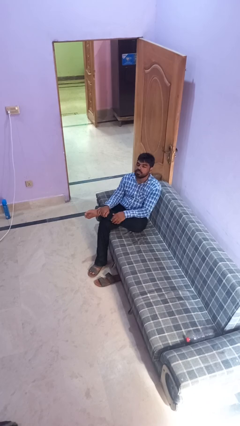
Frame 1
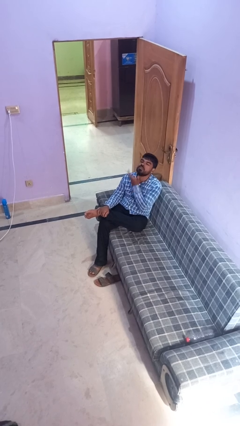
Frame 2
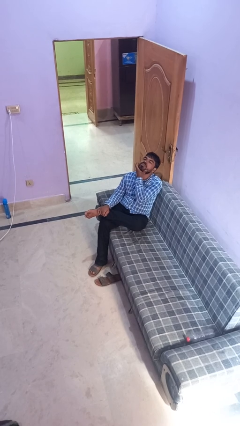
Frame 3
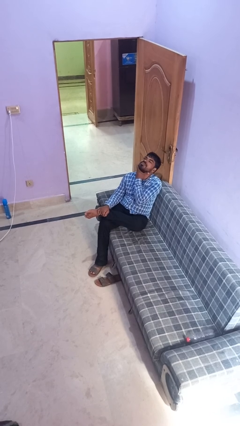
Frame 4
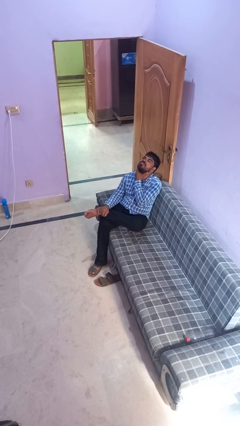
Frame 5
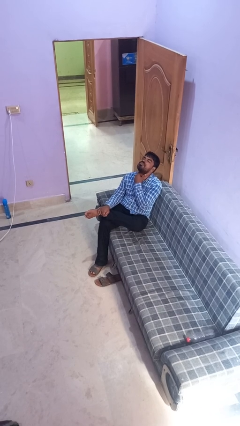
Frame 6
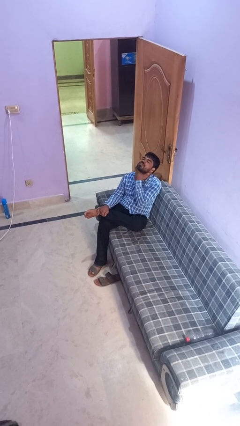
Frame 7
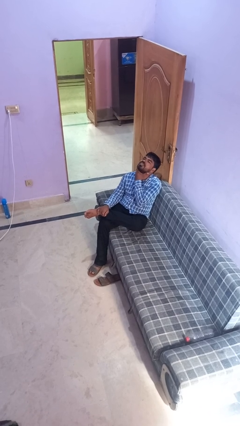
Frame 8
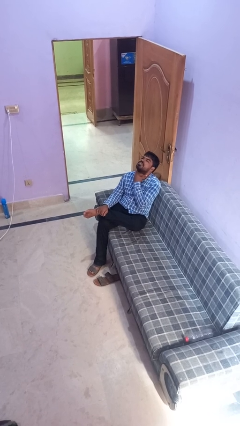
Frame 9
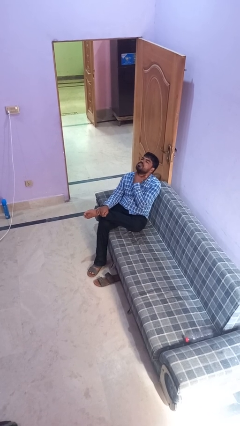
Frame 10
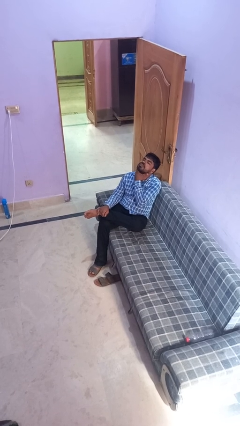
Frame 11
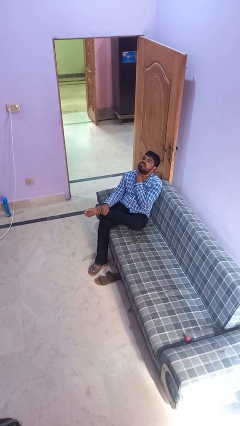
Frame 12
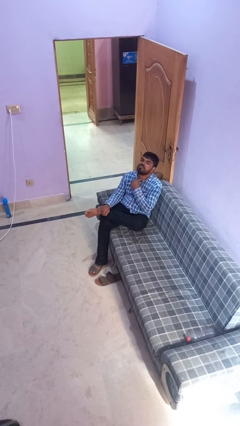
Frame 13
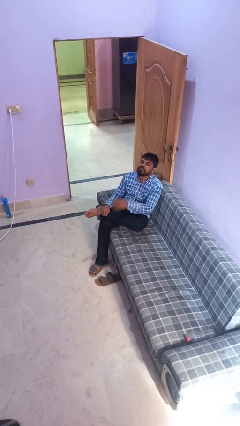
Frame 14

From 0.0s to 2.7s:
person rubs neck

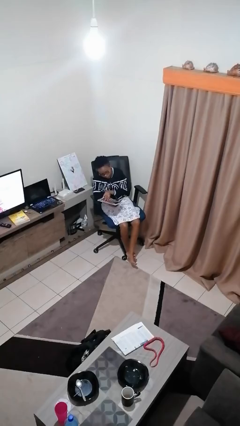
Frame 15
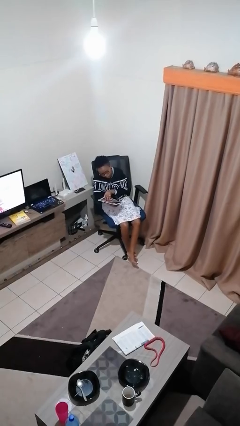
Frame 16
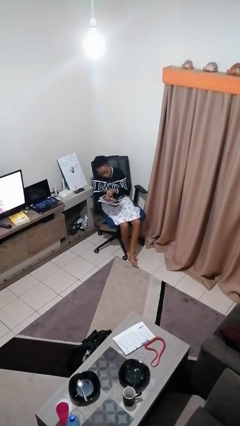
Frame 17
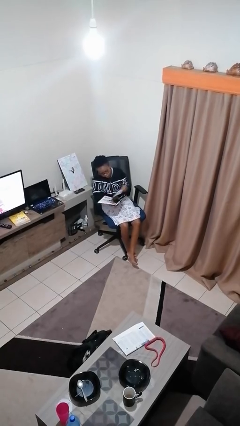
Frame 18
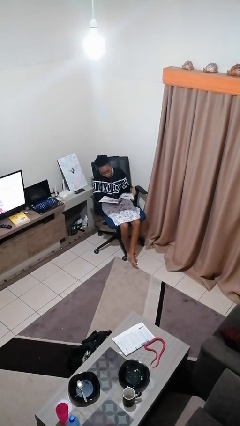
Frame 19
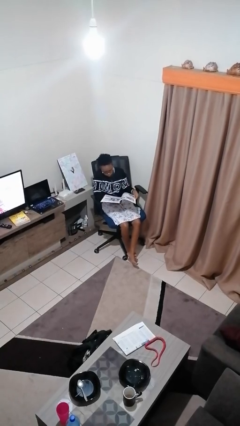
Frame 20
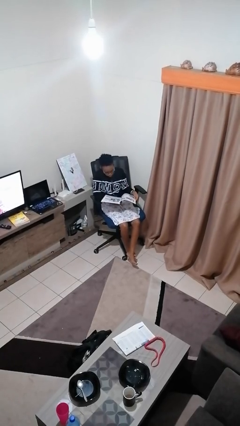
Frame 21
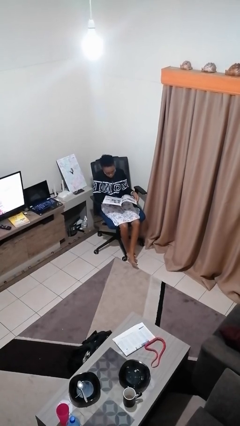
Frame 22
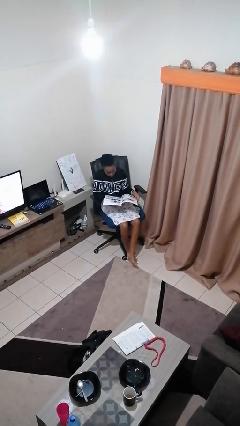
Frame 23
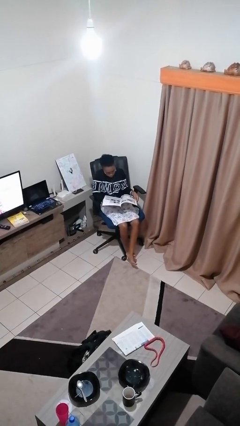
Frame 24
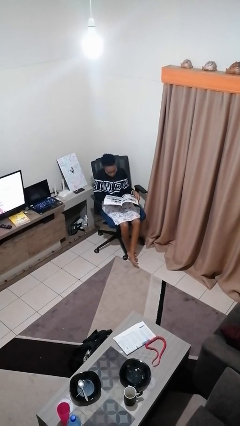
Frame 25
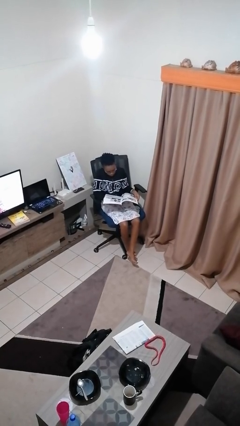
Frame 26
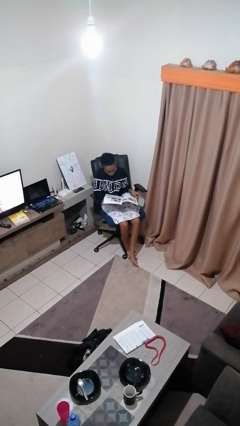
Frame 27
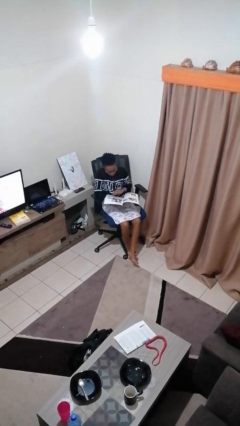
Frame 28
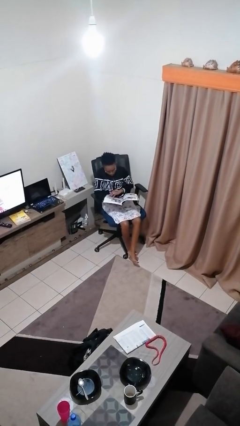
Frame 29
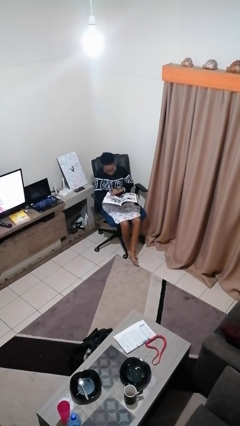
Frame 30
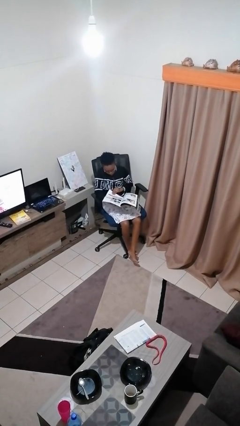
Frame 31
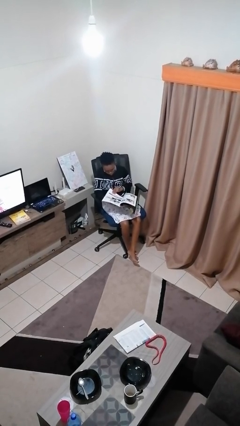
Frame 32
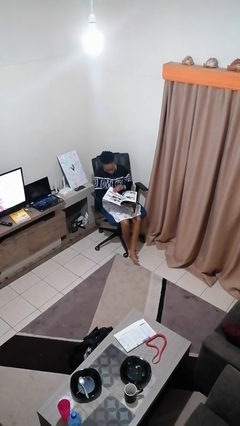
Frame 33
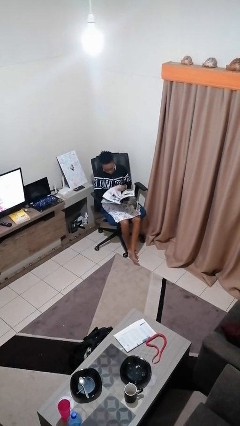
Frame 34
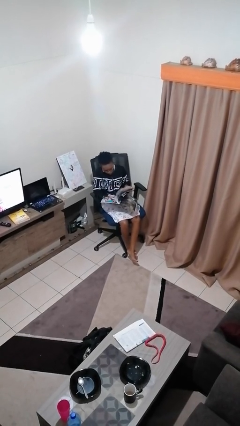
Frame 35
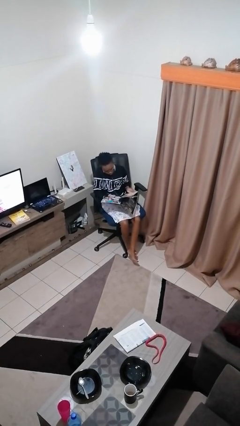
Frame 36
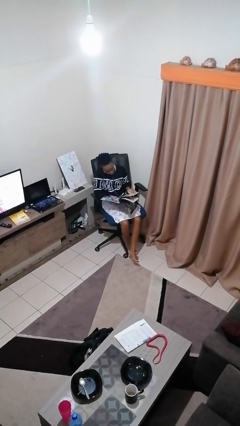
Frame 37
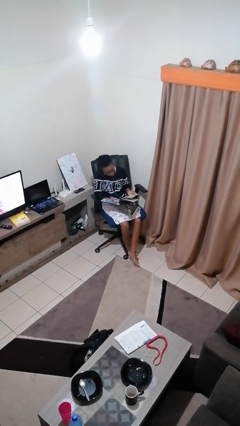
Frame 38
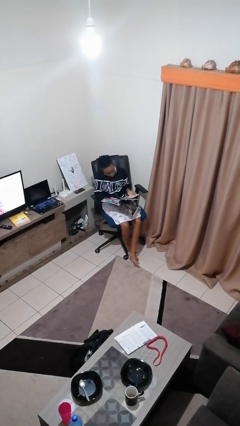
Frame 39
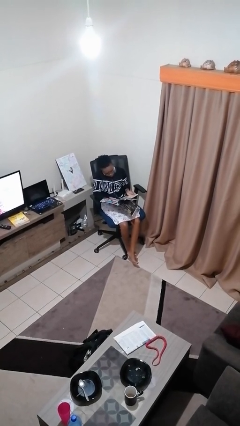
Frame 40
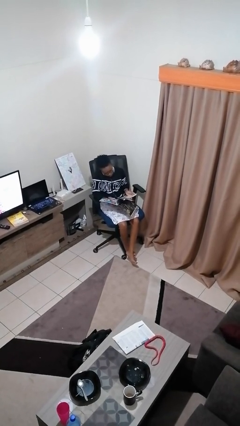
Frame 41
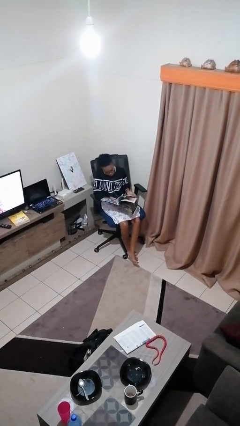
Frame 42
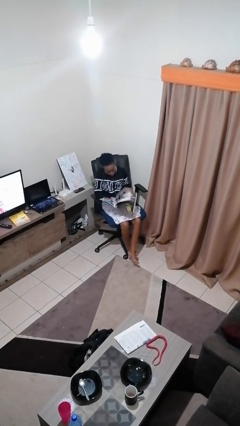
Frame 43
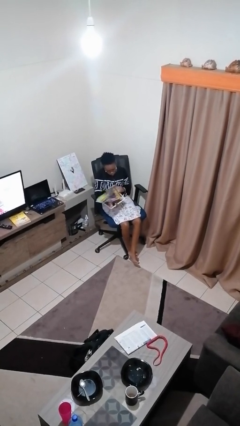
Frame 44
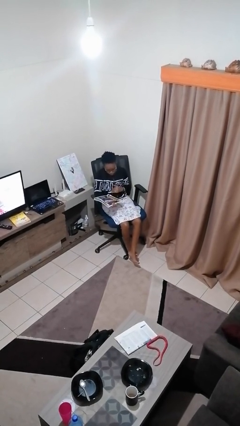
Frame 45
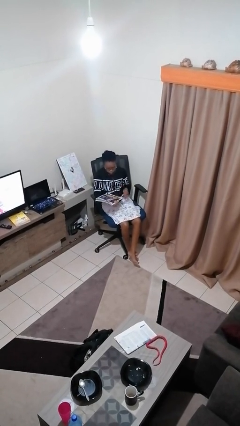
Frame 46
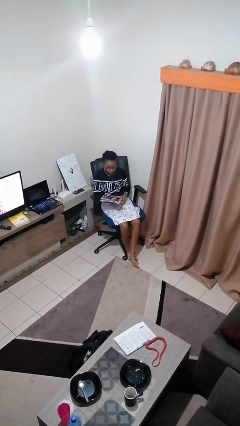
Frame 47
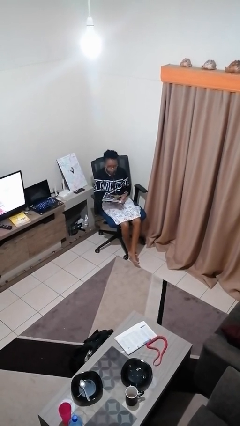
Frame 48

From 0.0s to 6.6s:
person reads magazine

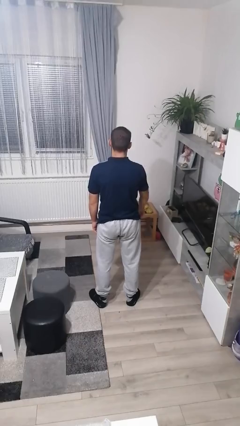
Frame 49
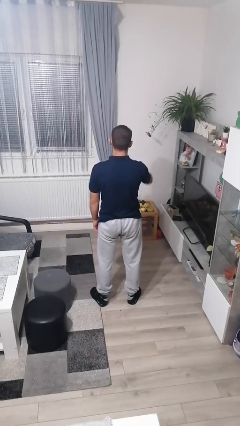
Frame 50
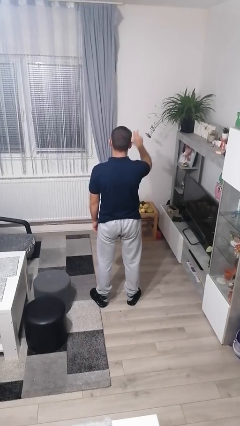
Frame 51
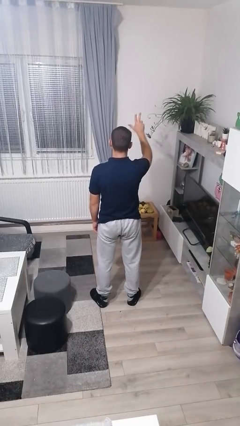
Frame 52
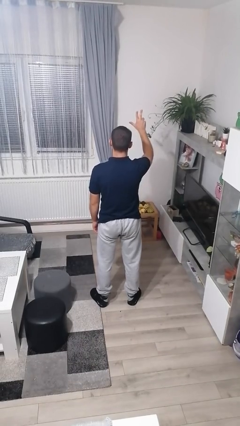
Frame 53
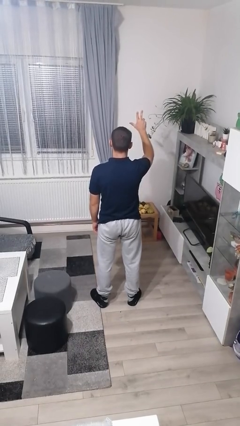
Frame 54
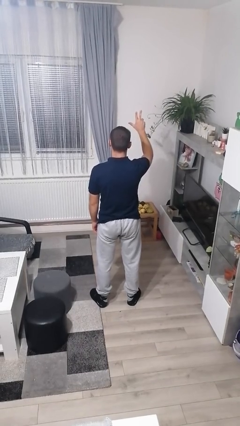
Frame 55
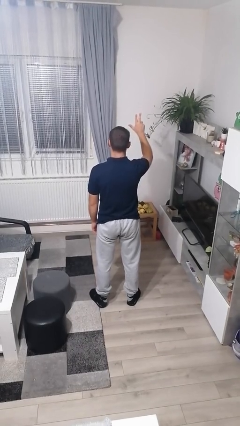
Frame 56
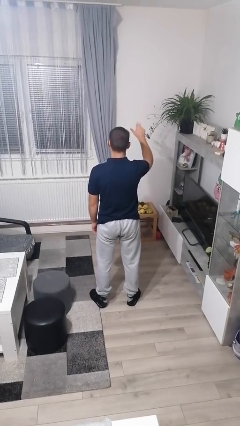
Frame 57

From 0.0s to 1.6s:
person gestures number three

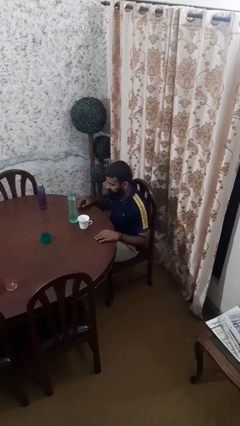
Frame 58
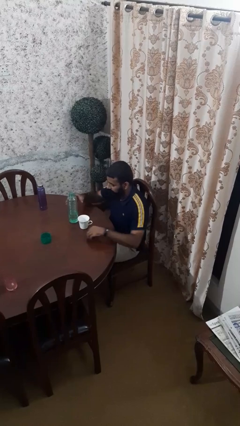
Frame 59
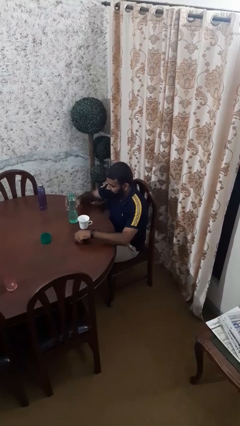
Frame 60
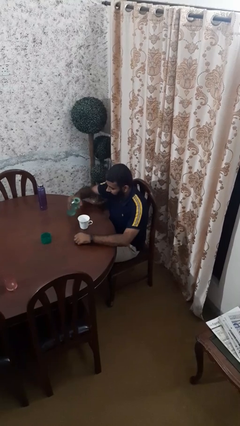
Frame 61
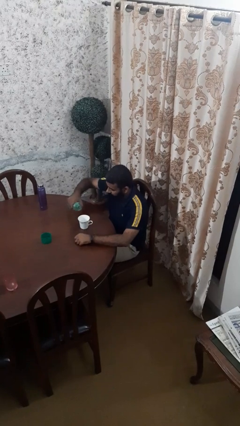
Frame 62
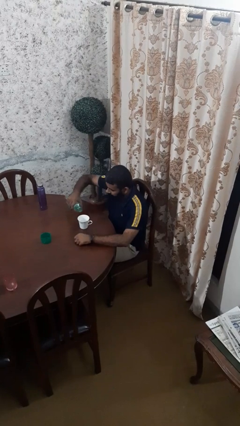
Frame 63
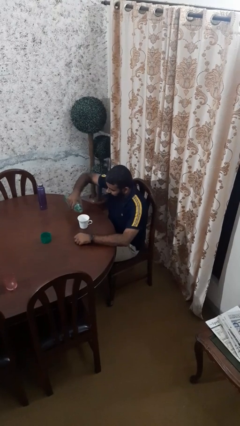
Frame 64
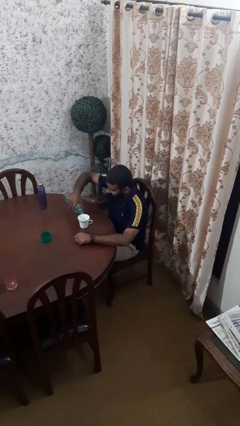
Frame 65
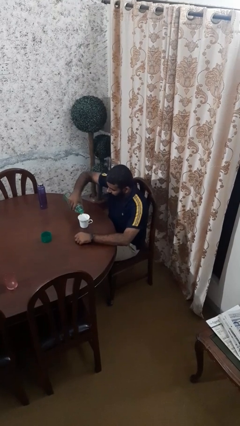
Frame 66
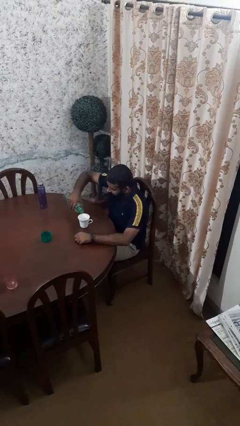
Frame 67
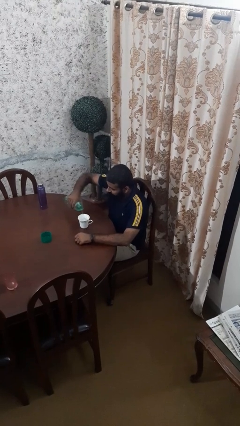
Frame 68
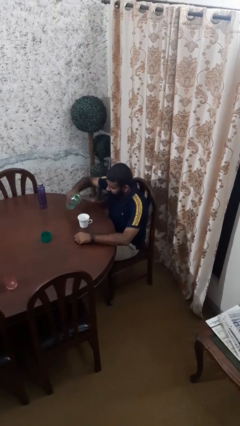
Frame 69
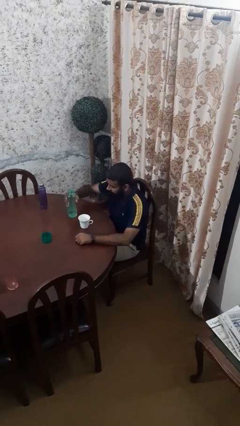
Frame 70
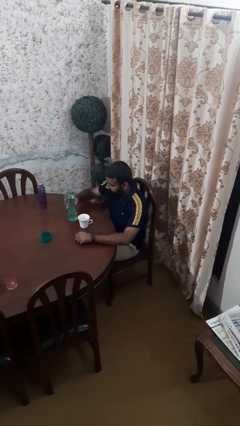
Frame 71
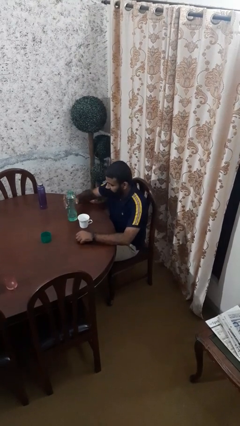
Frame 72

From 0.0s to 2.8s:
person pours liquid into cup

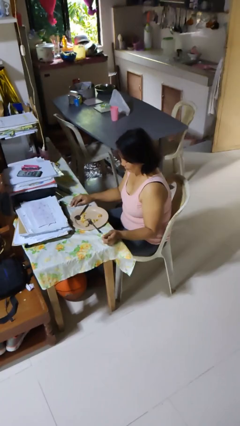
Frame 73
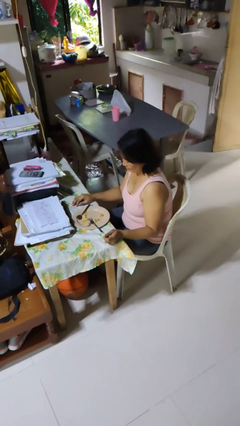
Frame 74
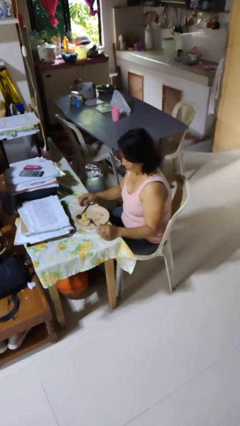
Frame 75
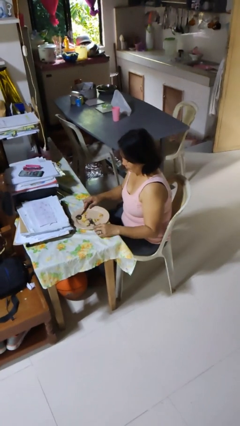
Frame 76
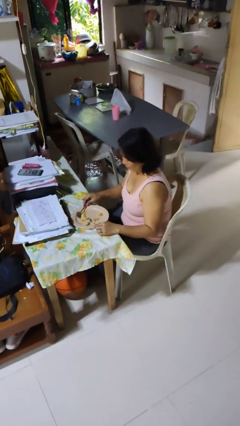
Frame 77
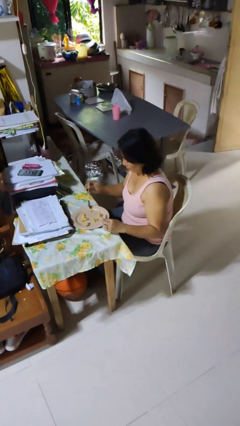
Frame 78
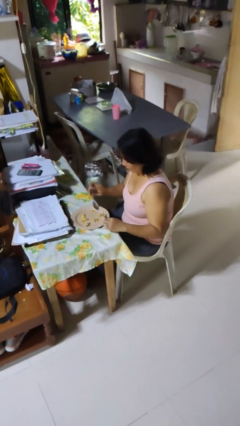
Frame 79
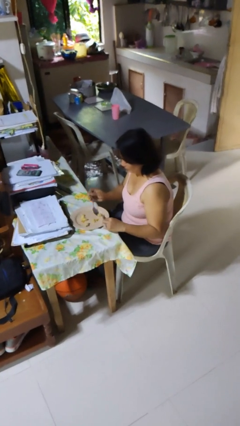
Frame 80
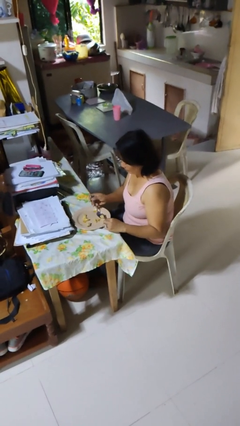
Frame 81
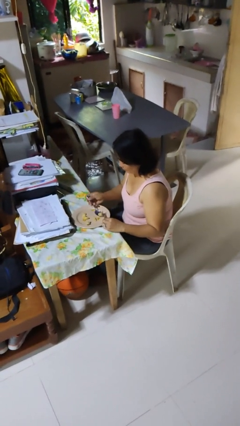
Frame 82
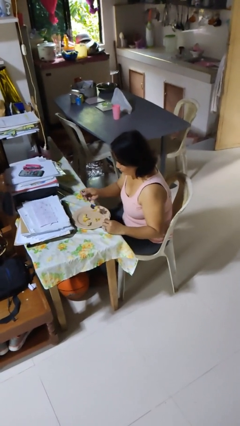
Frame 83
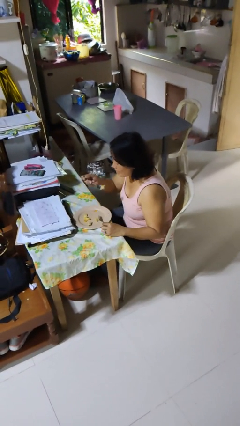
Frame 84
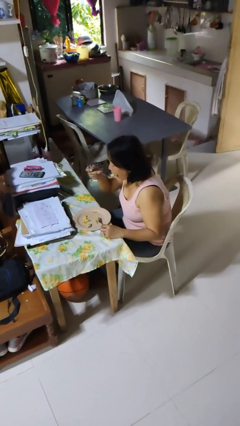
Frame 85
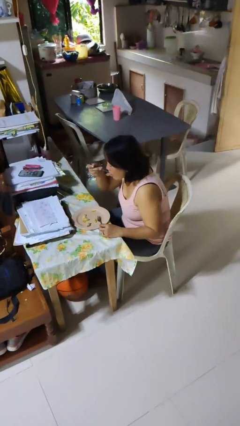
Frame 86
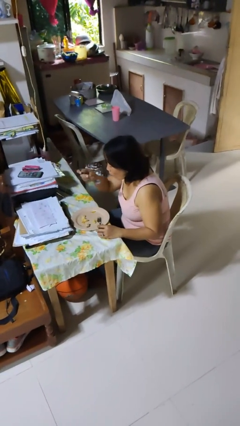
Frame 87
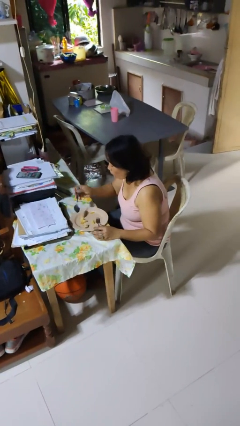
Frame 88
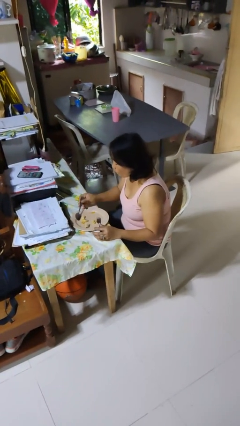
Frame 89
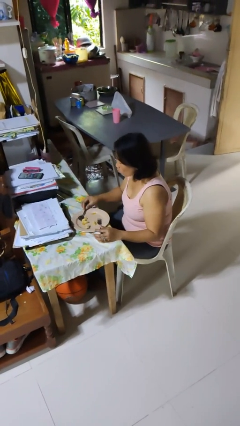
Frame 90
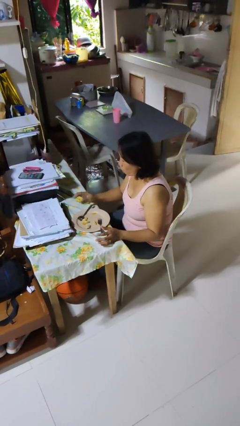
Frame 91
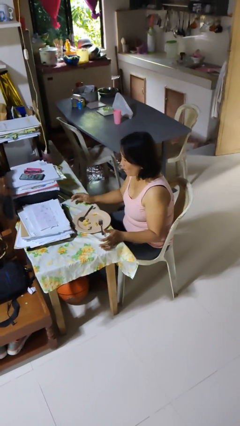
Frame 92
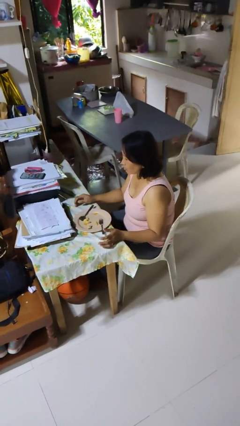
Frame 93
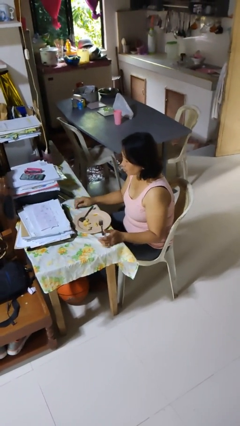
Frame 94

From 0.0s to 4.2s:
person eats with utensil

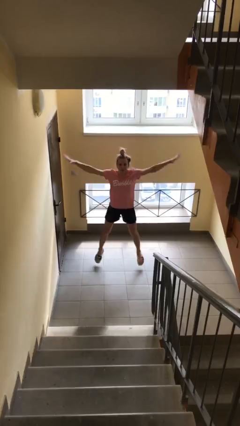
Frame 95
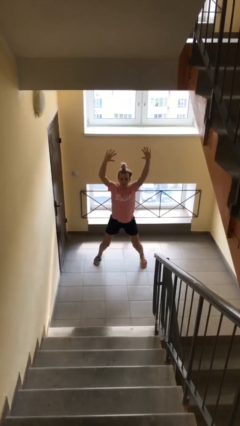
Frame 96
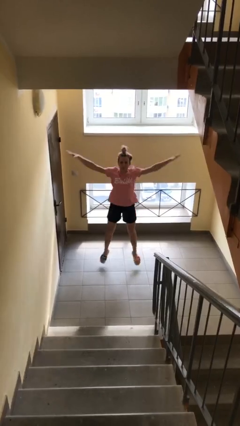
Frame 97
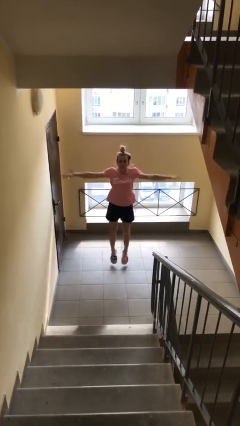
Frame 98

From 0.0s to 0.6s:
person exercises with jumping jacks
